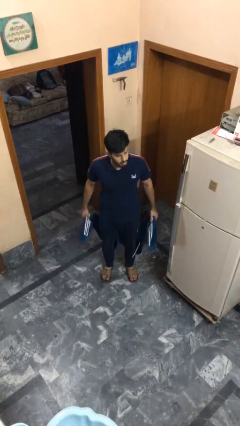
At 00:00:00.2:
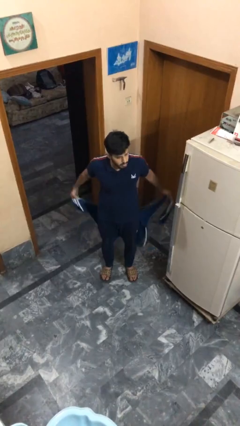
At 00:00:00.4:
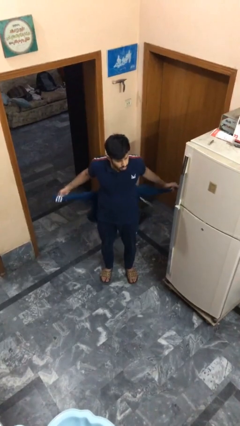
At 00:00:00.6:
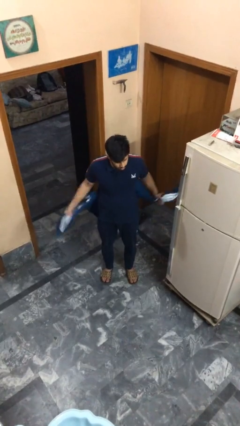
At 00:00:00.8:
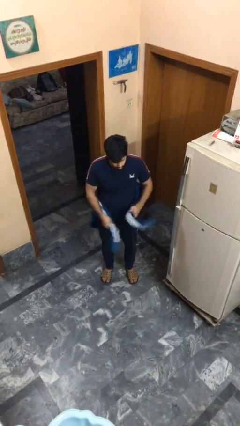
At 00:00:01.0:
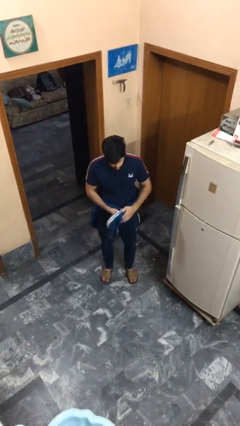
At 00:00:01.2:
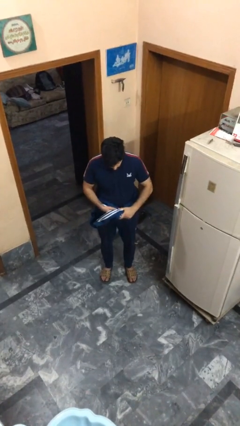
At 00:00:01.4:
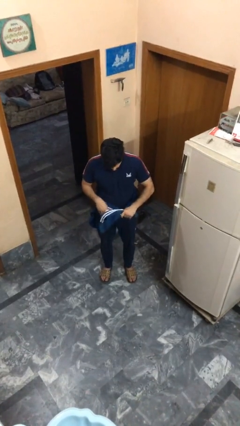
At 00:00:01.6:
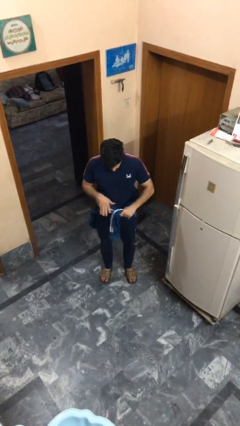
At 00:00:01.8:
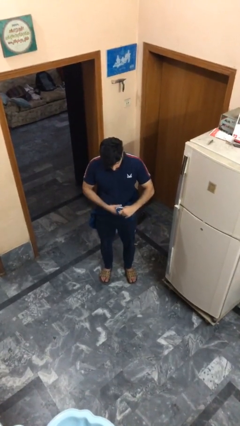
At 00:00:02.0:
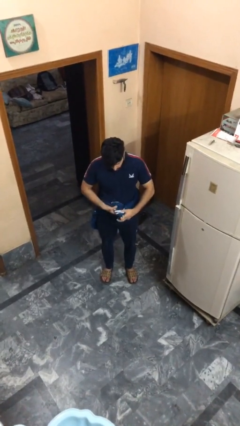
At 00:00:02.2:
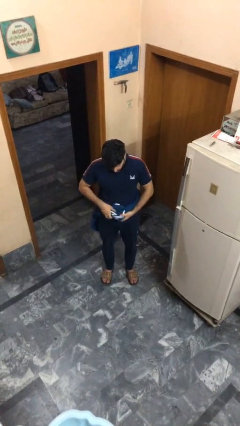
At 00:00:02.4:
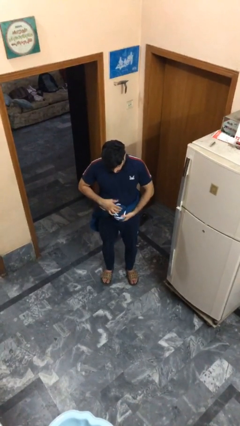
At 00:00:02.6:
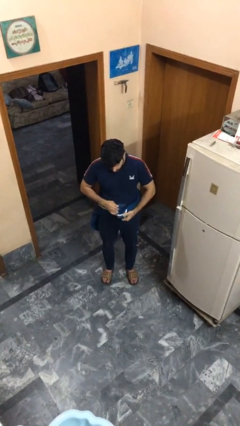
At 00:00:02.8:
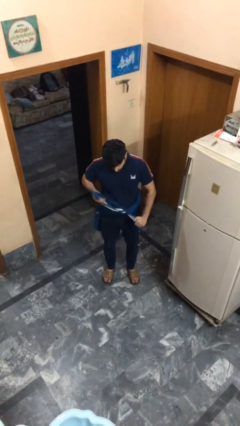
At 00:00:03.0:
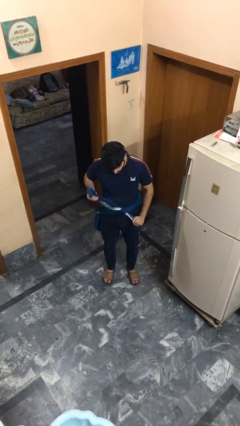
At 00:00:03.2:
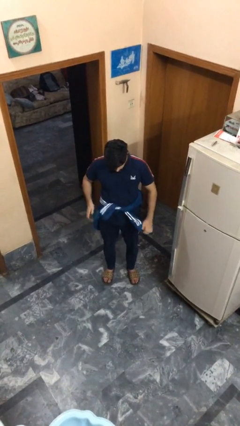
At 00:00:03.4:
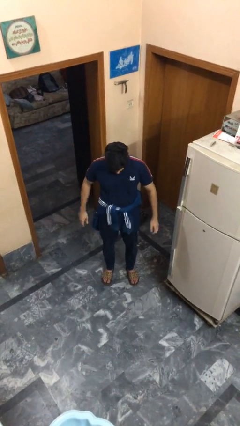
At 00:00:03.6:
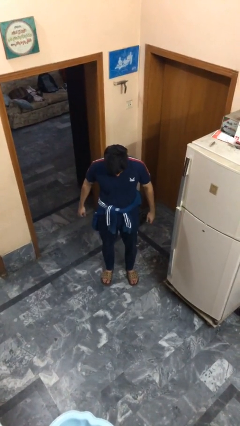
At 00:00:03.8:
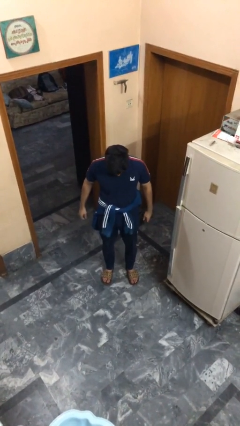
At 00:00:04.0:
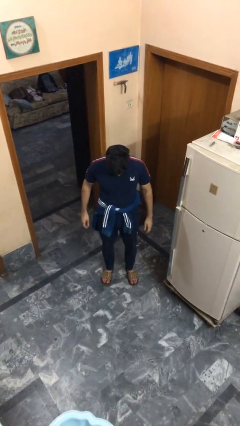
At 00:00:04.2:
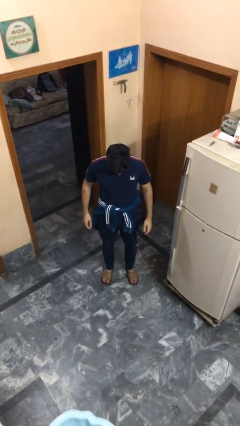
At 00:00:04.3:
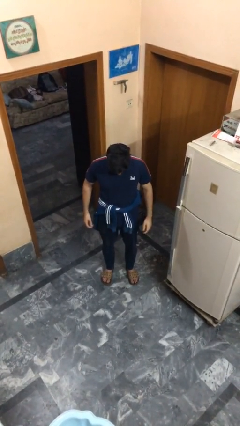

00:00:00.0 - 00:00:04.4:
person ties jacket around waist

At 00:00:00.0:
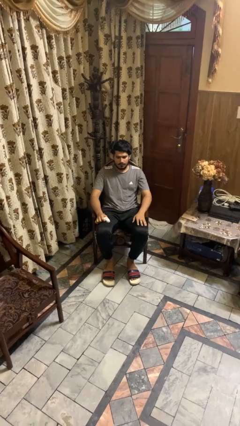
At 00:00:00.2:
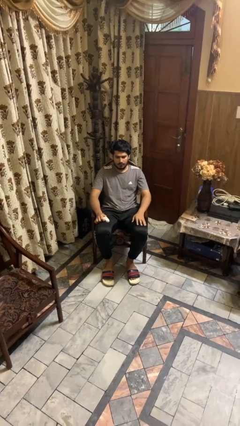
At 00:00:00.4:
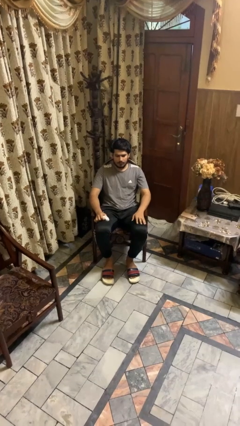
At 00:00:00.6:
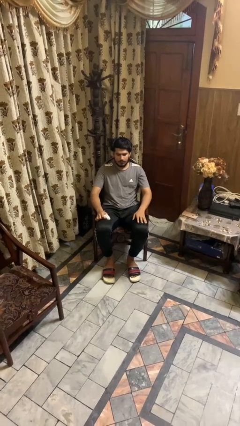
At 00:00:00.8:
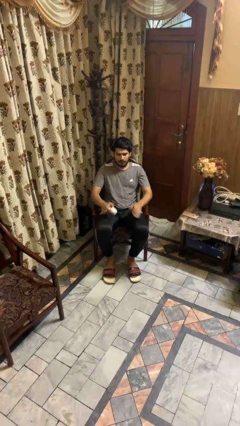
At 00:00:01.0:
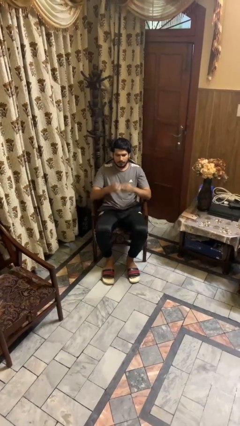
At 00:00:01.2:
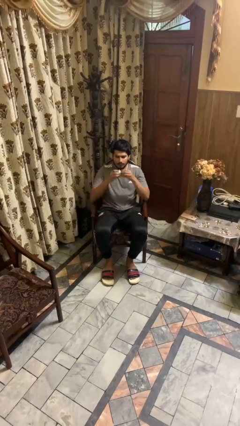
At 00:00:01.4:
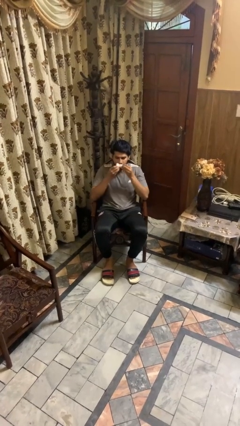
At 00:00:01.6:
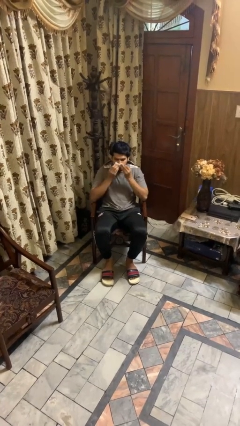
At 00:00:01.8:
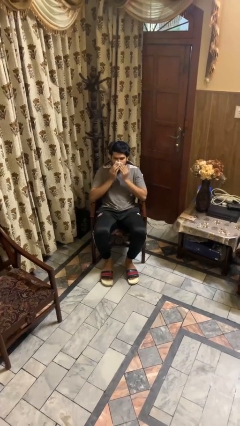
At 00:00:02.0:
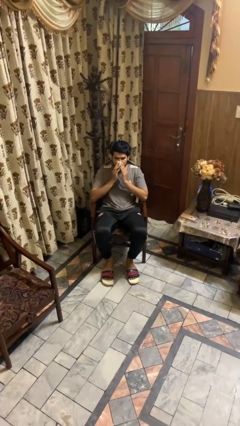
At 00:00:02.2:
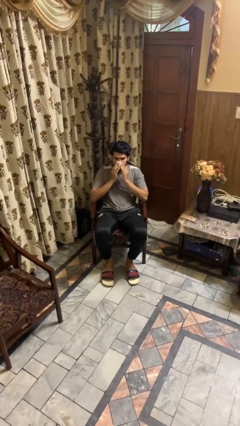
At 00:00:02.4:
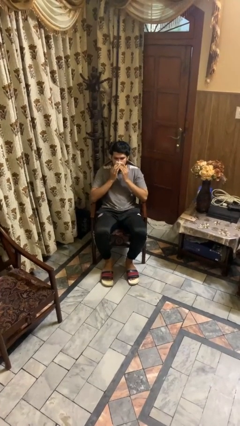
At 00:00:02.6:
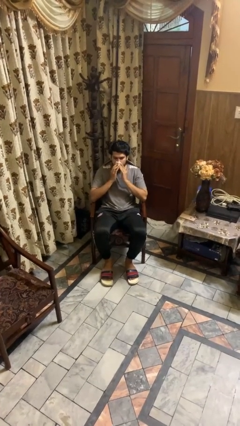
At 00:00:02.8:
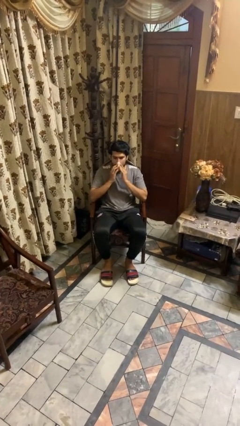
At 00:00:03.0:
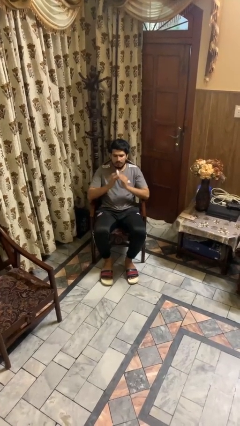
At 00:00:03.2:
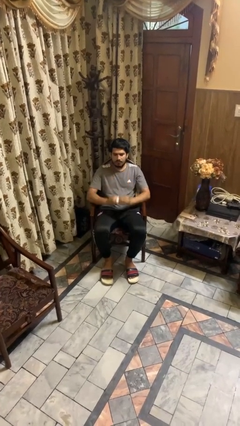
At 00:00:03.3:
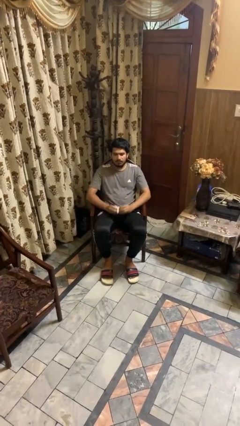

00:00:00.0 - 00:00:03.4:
person blows nose

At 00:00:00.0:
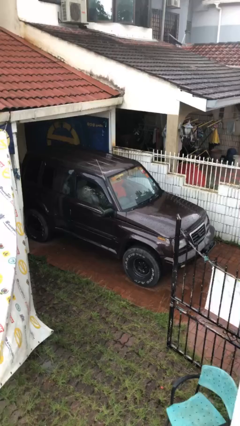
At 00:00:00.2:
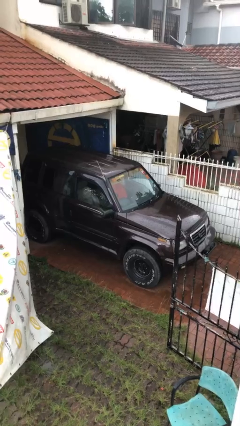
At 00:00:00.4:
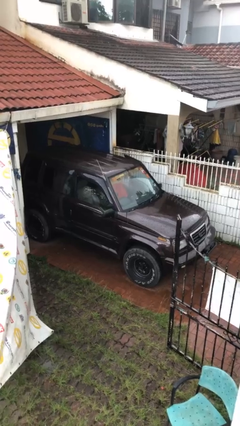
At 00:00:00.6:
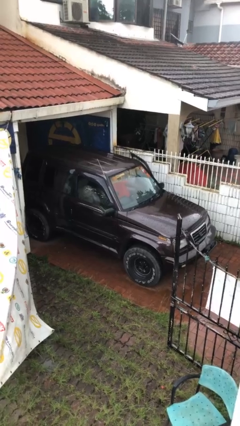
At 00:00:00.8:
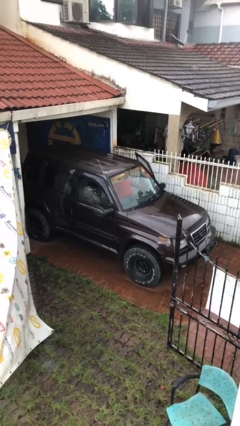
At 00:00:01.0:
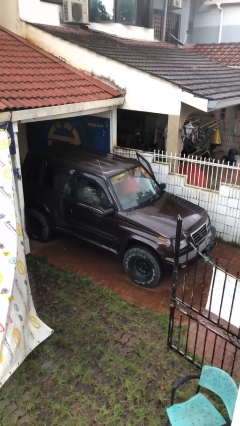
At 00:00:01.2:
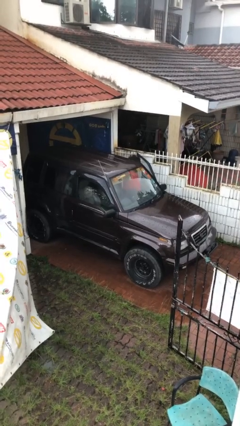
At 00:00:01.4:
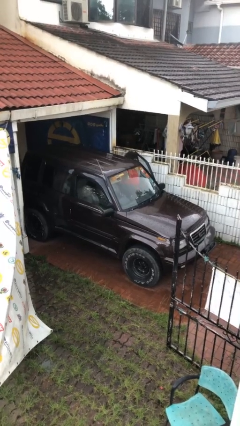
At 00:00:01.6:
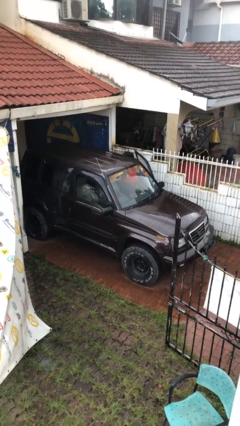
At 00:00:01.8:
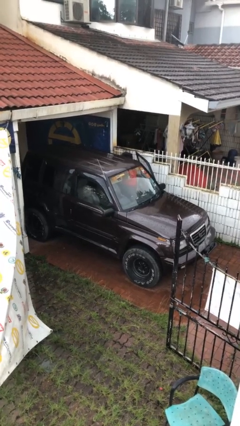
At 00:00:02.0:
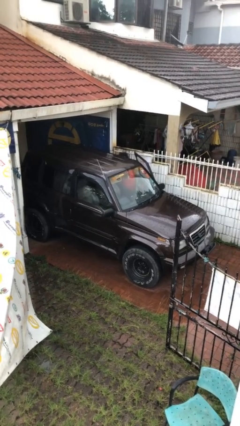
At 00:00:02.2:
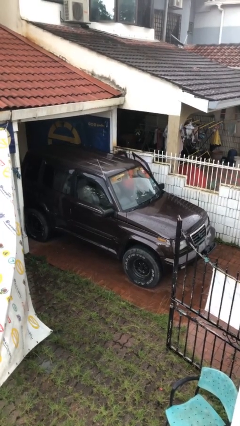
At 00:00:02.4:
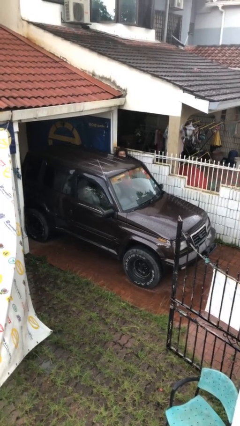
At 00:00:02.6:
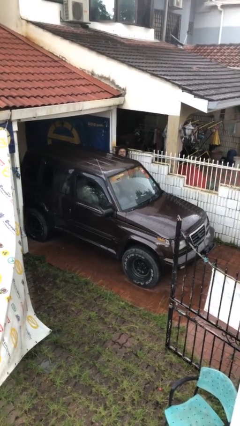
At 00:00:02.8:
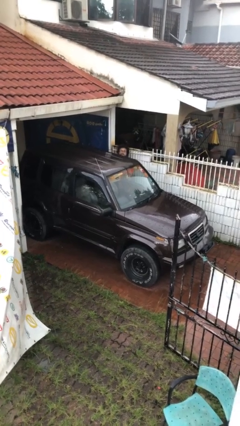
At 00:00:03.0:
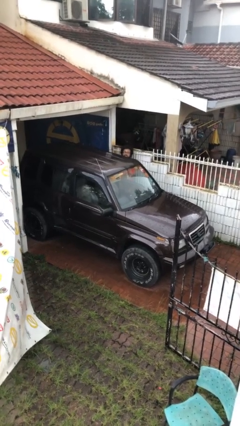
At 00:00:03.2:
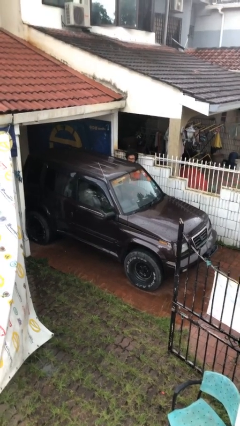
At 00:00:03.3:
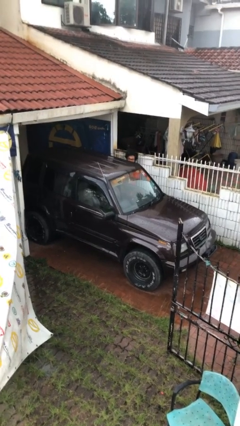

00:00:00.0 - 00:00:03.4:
car drops off person

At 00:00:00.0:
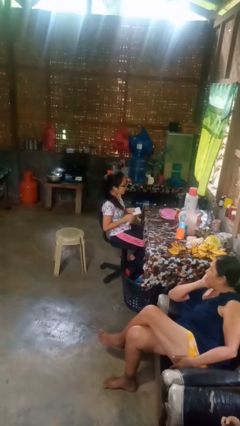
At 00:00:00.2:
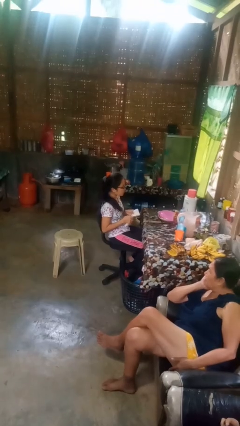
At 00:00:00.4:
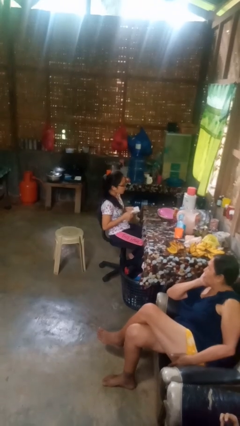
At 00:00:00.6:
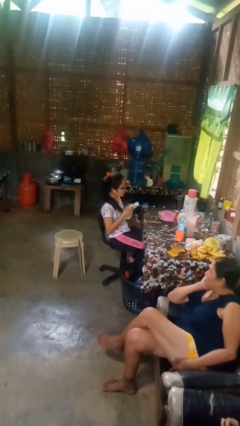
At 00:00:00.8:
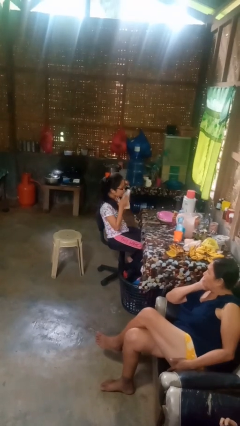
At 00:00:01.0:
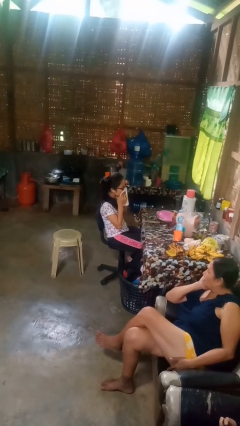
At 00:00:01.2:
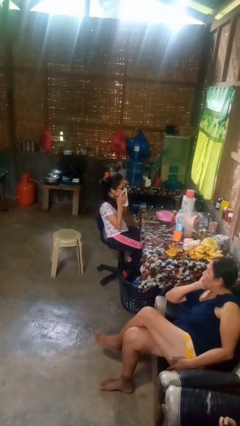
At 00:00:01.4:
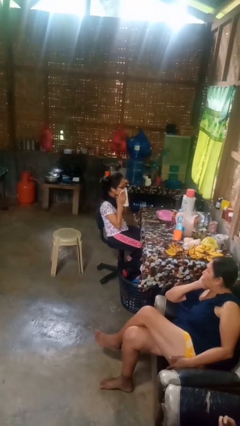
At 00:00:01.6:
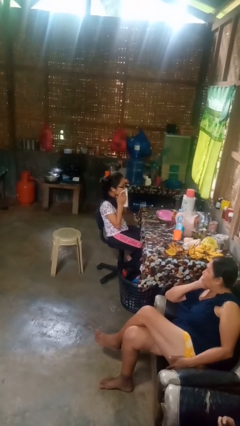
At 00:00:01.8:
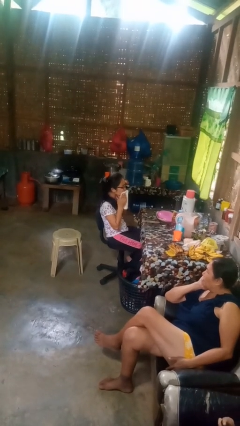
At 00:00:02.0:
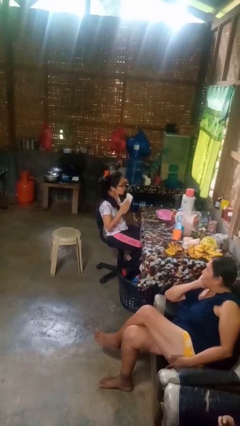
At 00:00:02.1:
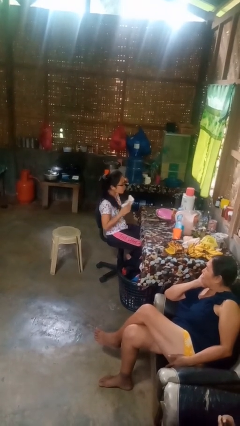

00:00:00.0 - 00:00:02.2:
person wipes mouth with napkin

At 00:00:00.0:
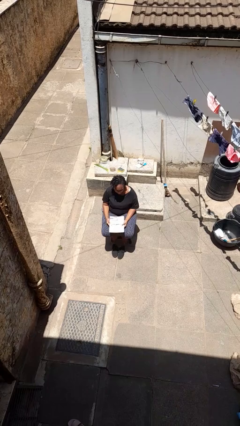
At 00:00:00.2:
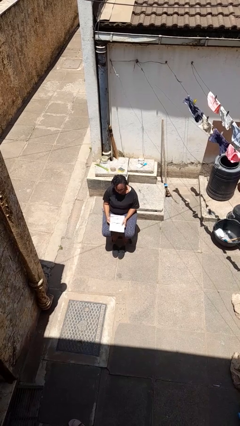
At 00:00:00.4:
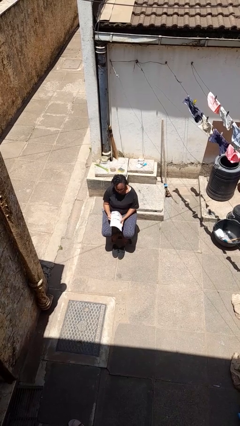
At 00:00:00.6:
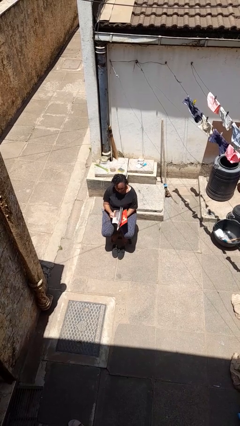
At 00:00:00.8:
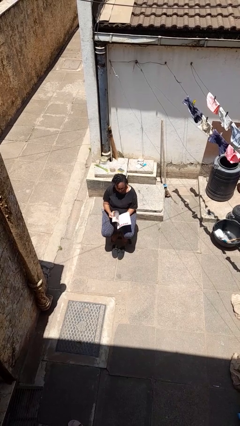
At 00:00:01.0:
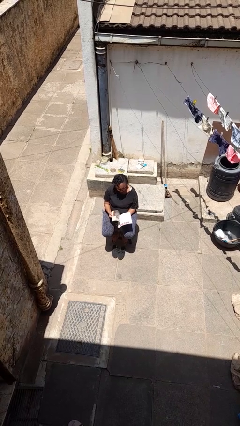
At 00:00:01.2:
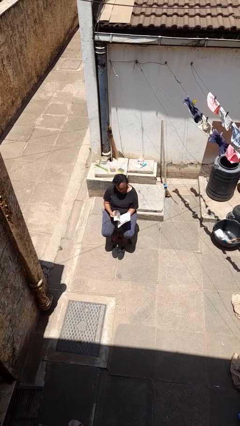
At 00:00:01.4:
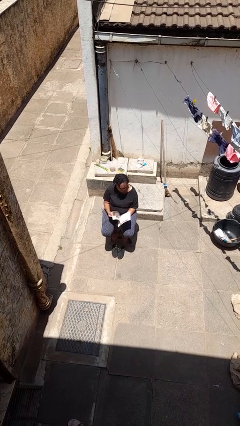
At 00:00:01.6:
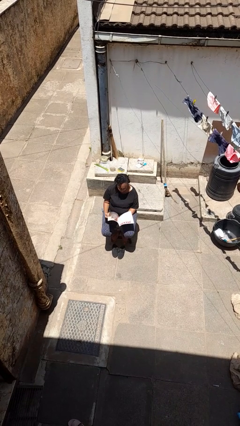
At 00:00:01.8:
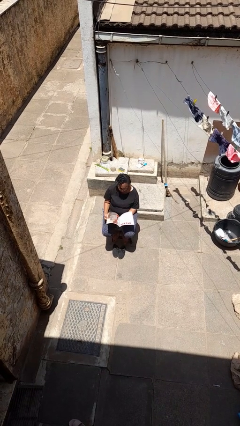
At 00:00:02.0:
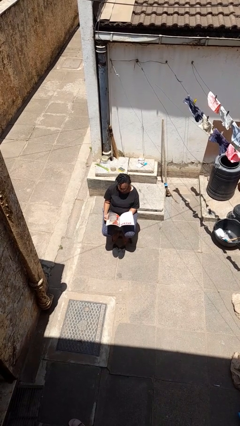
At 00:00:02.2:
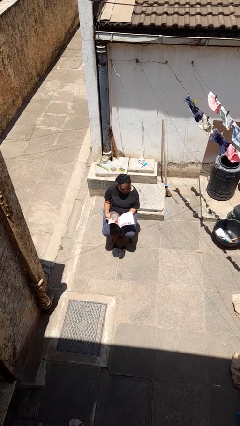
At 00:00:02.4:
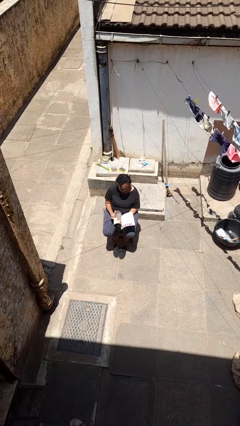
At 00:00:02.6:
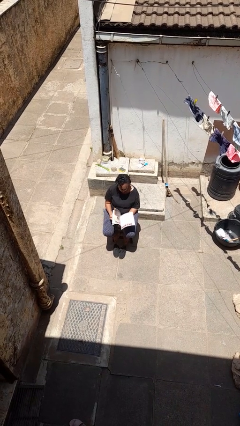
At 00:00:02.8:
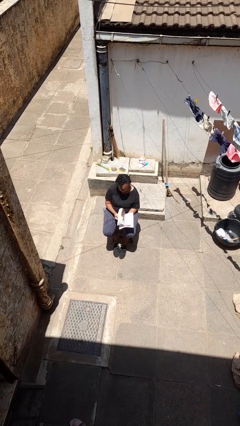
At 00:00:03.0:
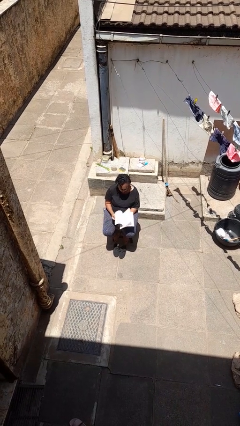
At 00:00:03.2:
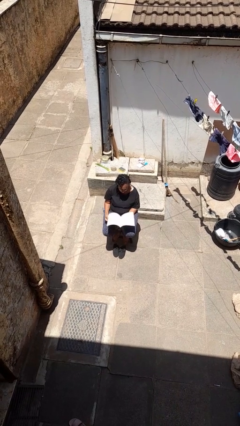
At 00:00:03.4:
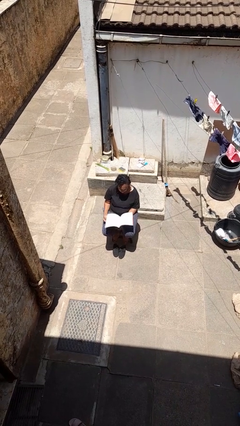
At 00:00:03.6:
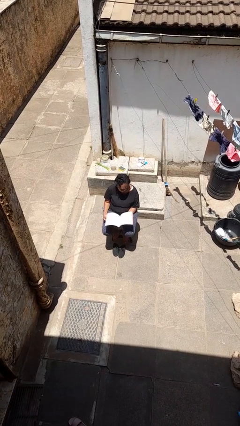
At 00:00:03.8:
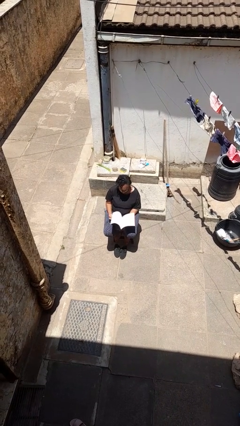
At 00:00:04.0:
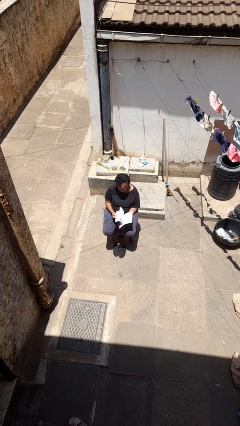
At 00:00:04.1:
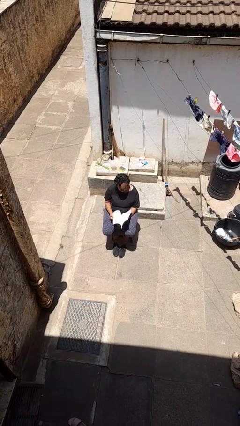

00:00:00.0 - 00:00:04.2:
person reads magazine
